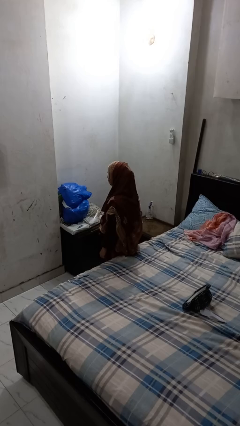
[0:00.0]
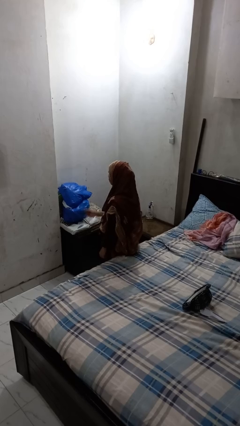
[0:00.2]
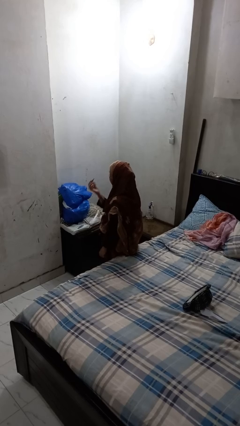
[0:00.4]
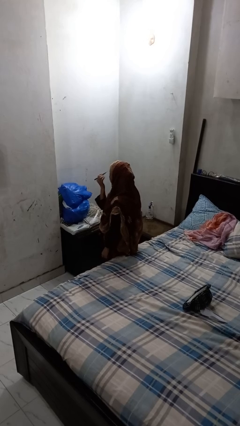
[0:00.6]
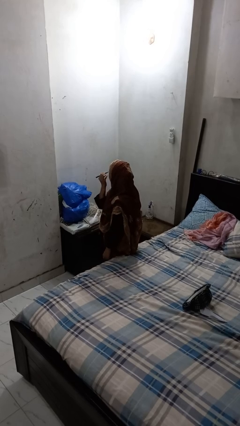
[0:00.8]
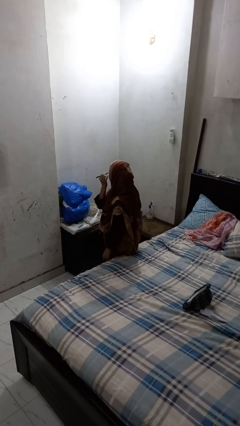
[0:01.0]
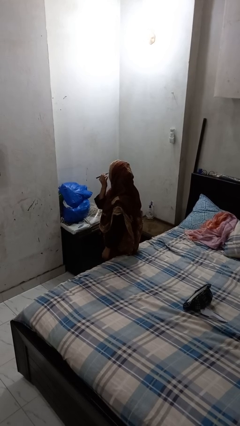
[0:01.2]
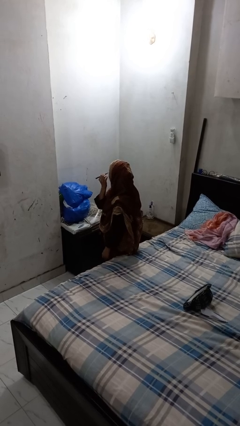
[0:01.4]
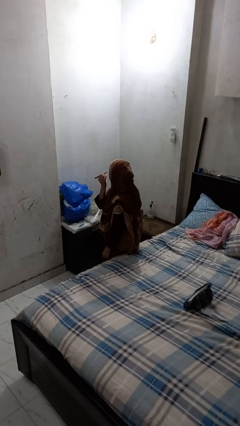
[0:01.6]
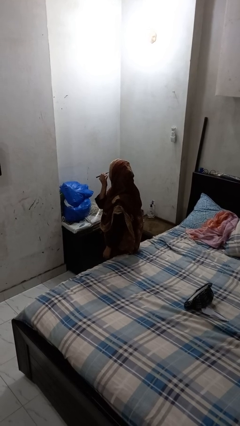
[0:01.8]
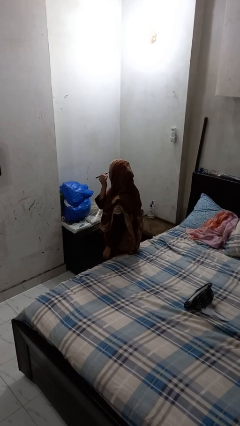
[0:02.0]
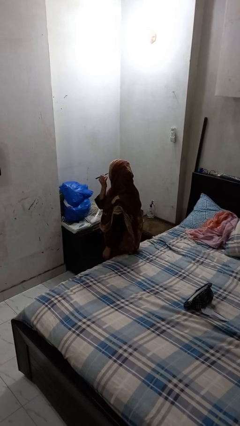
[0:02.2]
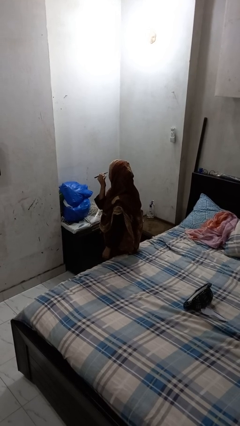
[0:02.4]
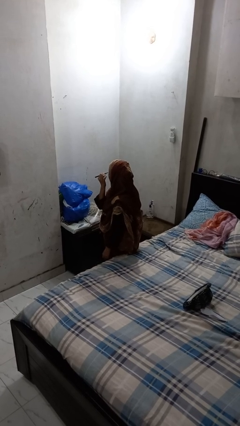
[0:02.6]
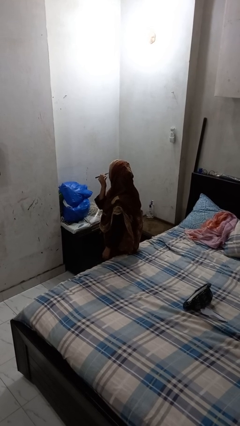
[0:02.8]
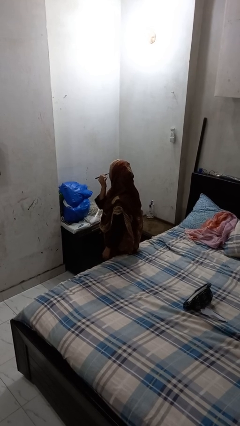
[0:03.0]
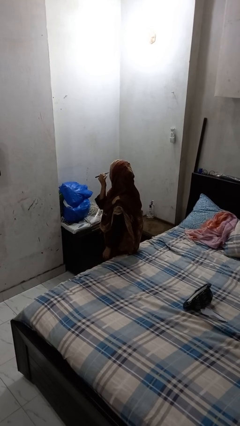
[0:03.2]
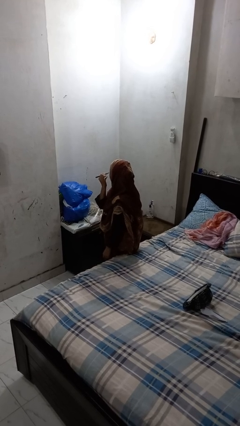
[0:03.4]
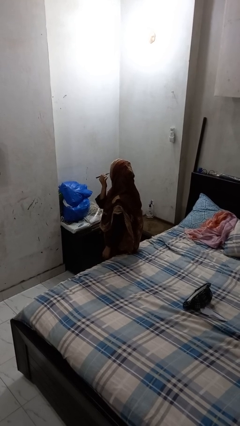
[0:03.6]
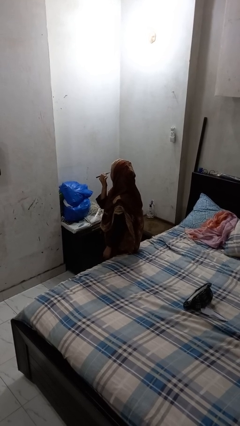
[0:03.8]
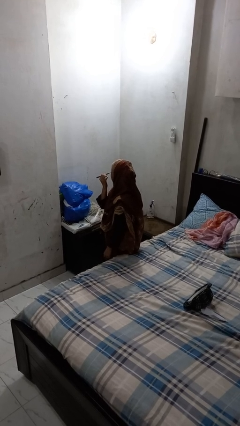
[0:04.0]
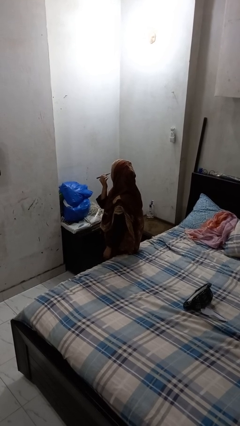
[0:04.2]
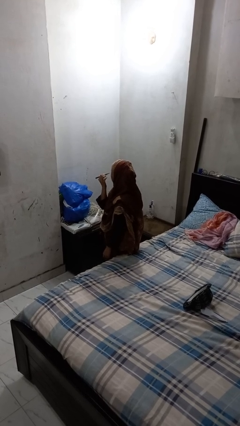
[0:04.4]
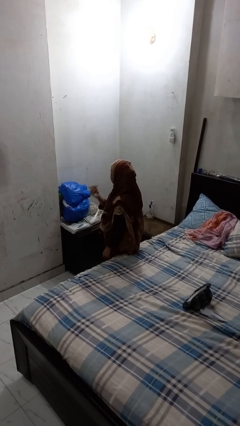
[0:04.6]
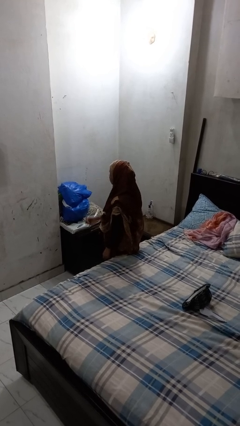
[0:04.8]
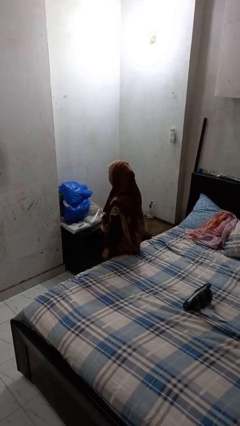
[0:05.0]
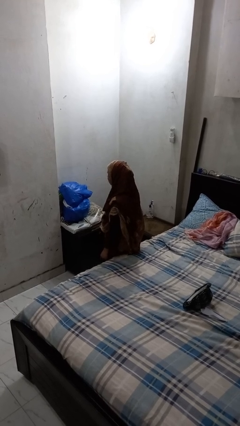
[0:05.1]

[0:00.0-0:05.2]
person applies eye makeup

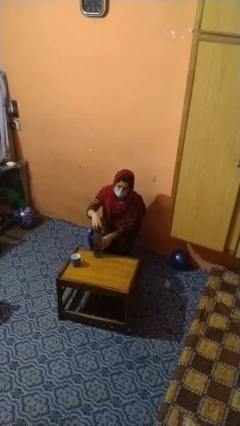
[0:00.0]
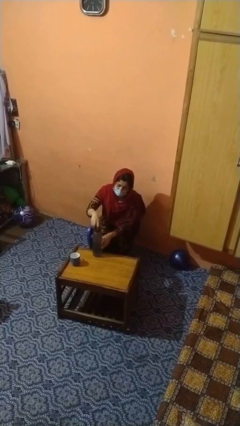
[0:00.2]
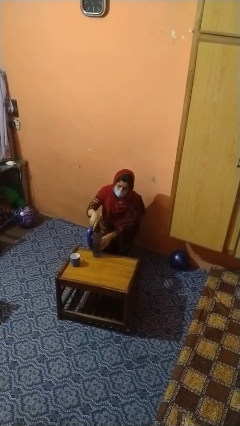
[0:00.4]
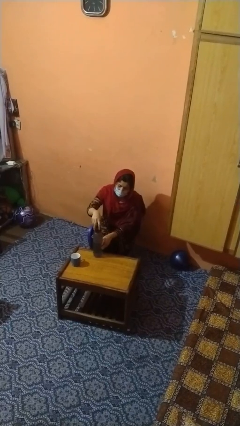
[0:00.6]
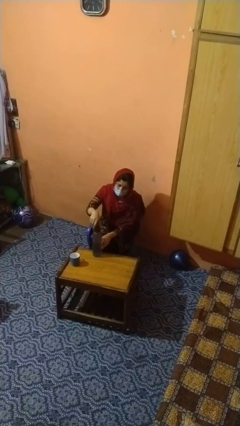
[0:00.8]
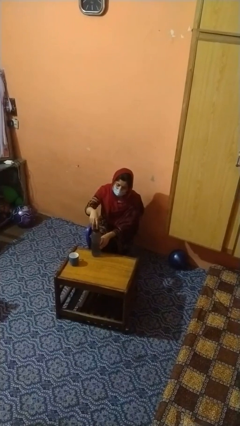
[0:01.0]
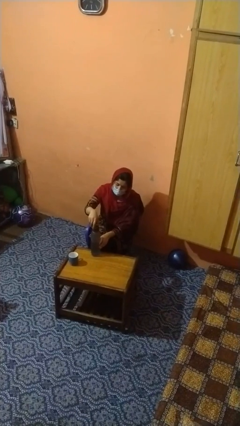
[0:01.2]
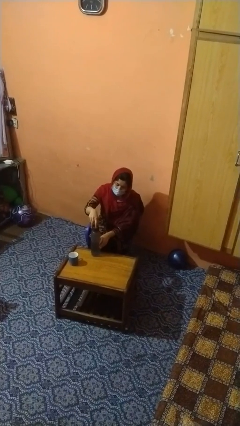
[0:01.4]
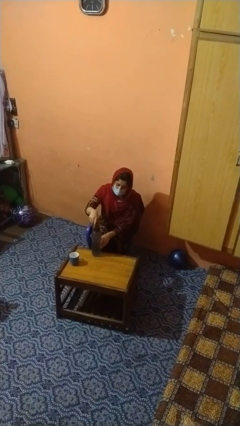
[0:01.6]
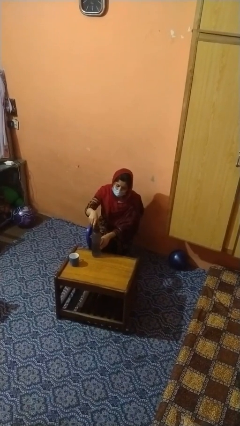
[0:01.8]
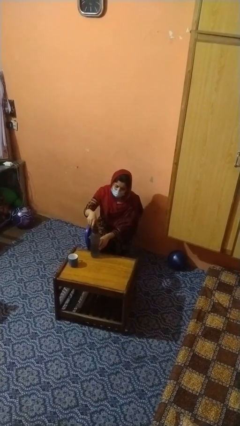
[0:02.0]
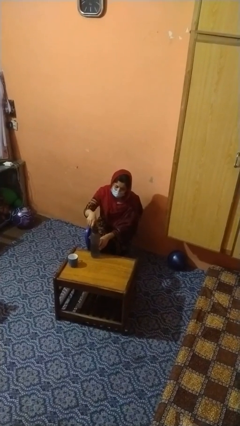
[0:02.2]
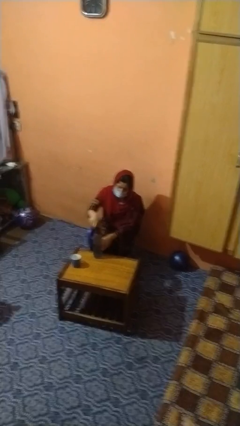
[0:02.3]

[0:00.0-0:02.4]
person screws lid to bottle

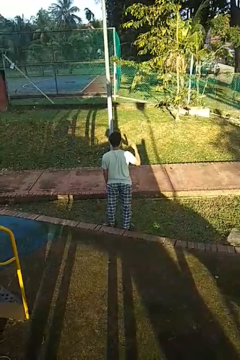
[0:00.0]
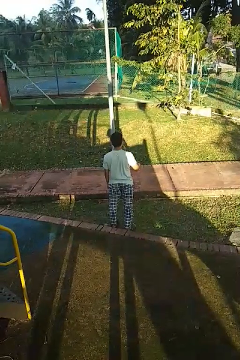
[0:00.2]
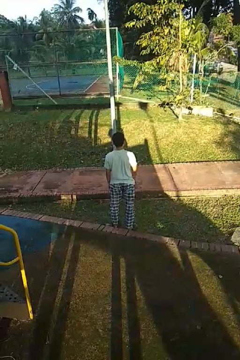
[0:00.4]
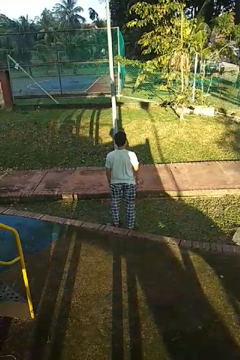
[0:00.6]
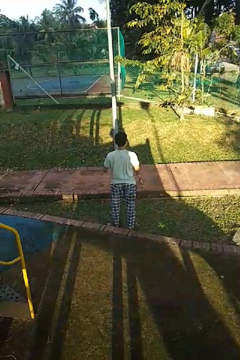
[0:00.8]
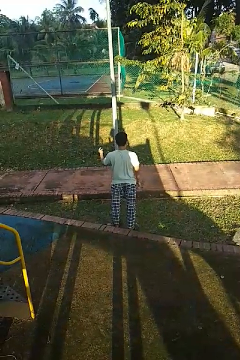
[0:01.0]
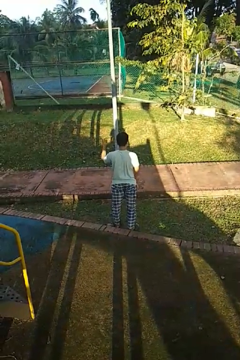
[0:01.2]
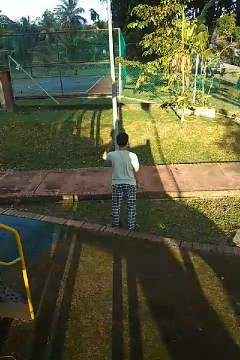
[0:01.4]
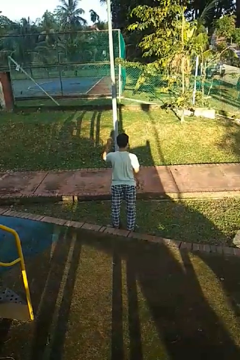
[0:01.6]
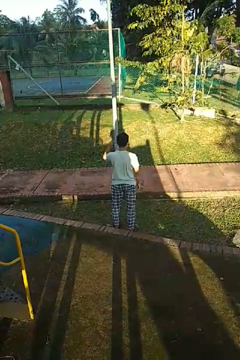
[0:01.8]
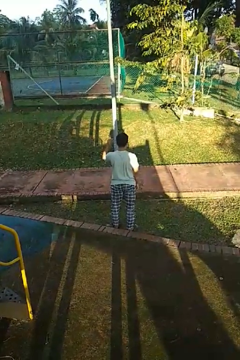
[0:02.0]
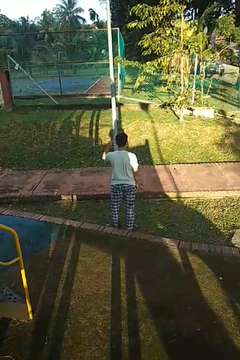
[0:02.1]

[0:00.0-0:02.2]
person gestures listen closely

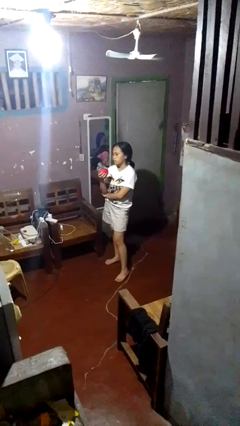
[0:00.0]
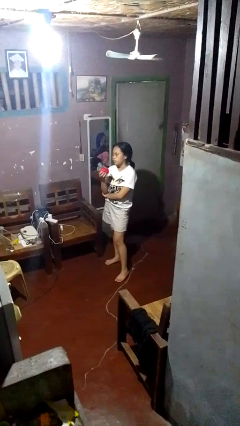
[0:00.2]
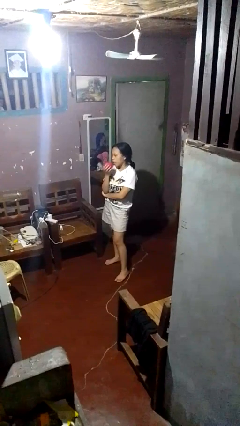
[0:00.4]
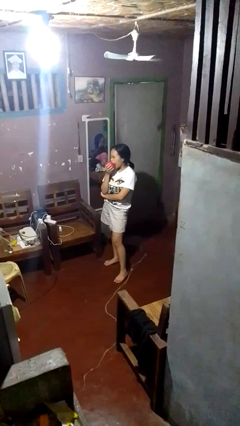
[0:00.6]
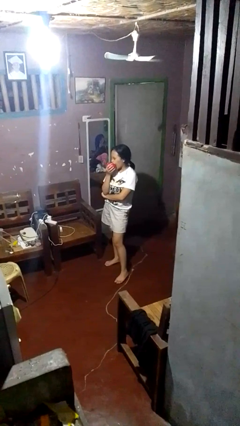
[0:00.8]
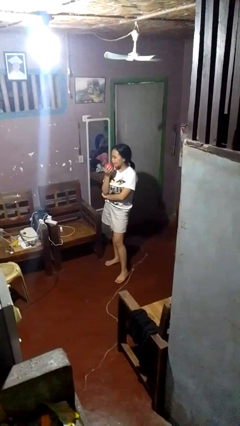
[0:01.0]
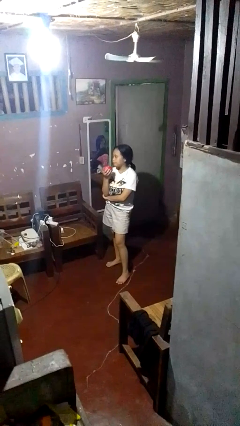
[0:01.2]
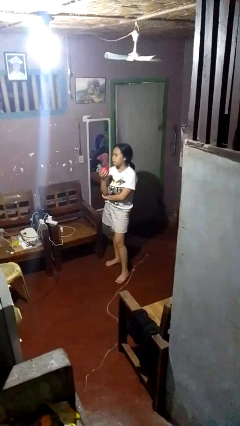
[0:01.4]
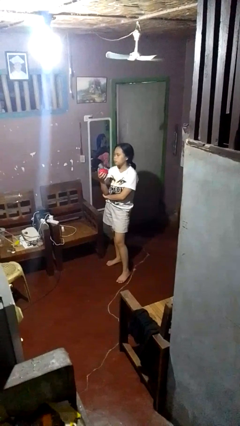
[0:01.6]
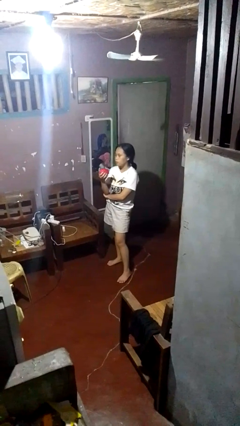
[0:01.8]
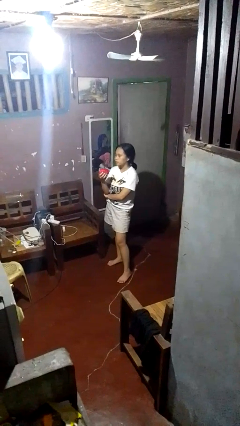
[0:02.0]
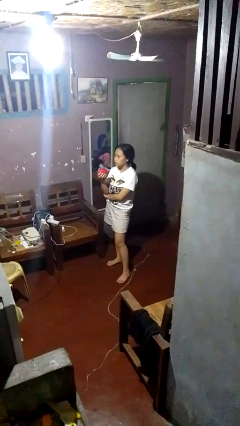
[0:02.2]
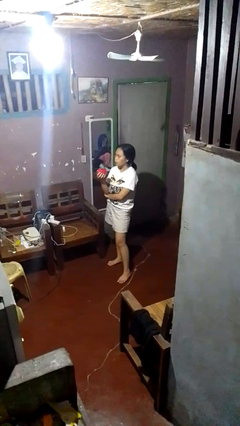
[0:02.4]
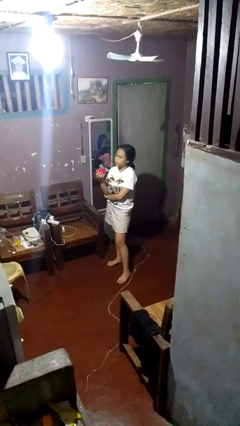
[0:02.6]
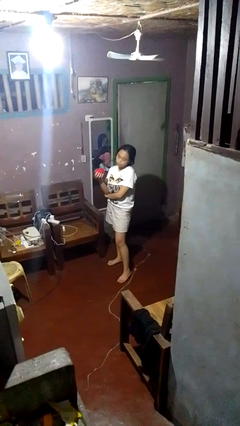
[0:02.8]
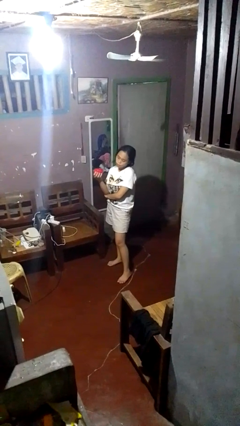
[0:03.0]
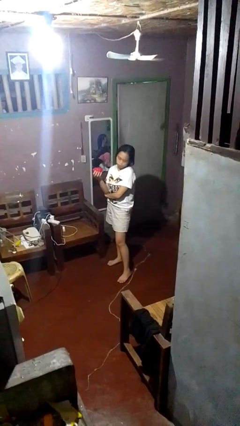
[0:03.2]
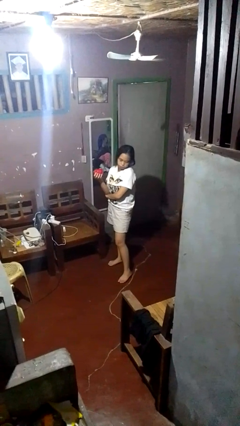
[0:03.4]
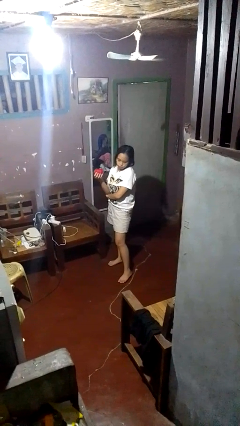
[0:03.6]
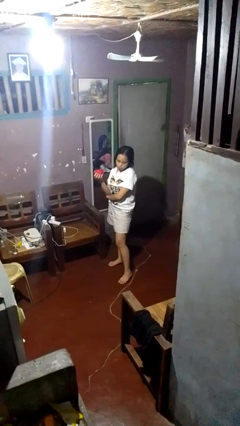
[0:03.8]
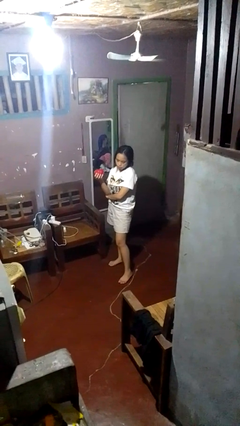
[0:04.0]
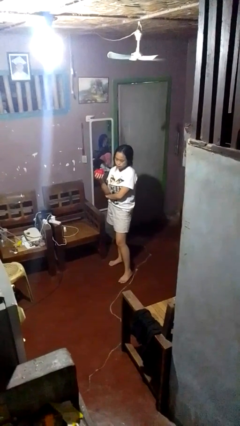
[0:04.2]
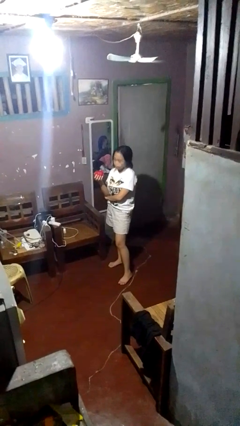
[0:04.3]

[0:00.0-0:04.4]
person eats apple

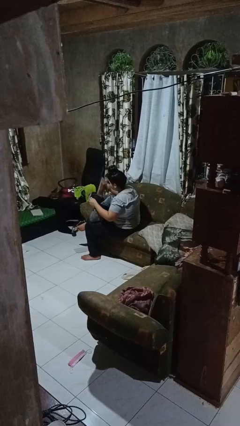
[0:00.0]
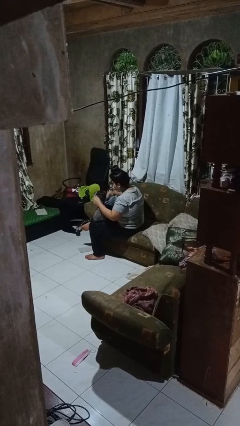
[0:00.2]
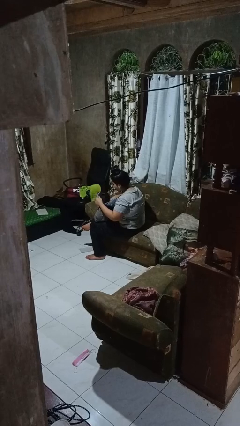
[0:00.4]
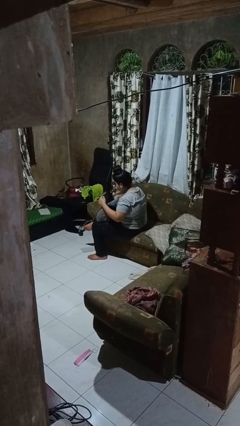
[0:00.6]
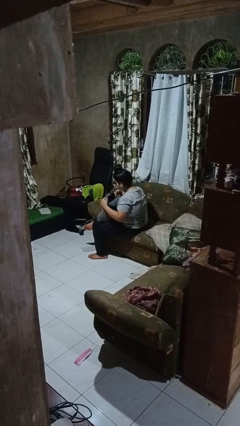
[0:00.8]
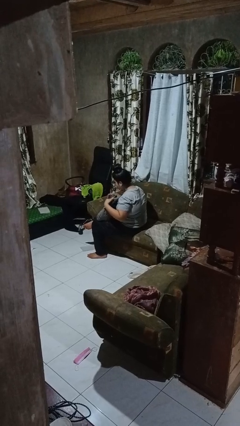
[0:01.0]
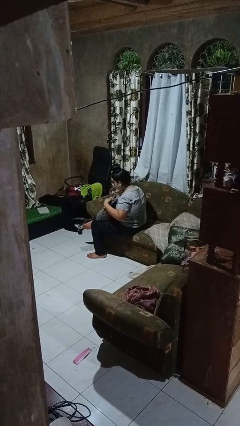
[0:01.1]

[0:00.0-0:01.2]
person puts object into backpack

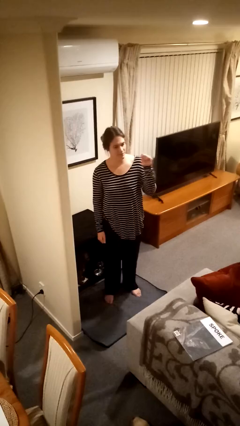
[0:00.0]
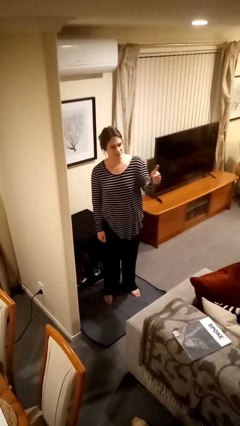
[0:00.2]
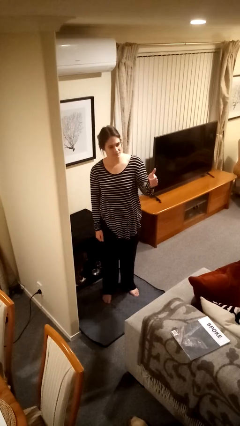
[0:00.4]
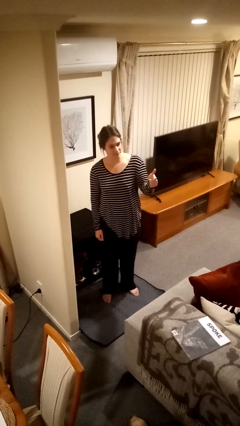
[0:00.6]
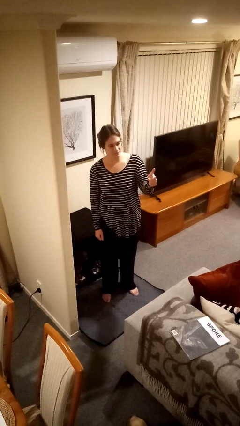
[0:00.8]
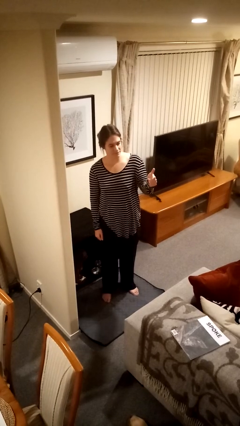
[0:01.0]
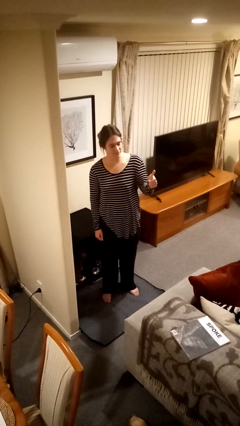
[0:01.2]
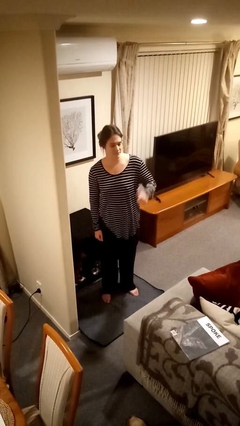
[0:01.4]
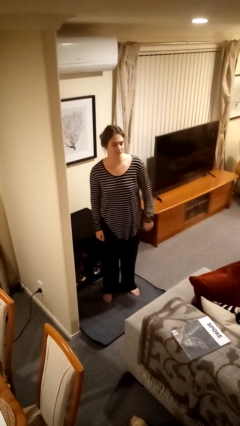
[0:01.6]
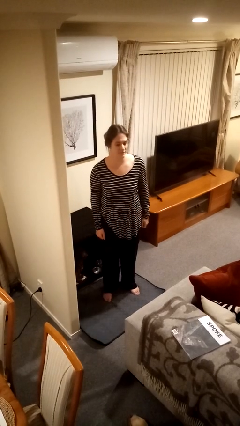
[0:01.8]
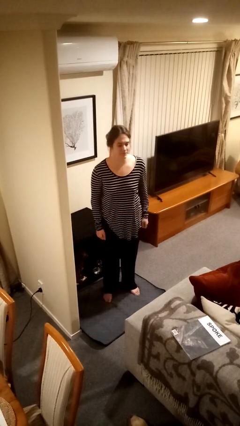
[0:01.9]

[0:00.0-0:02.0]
person gestures thumbs up
